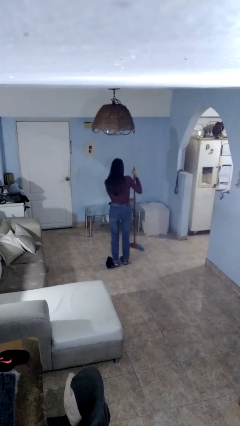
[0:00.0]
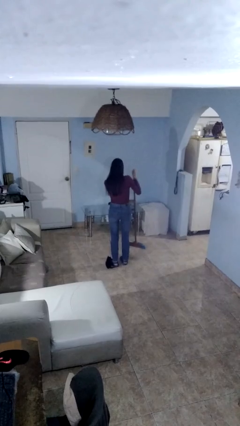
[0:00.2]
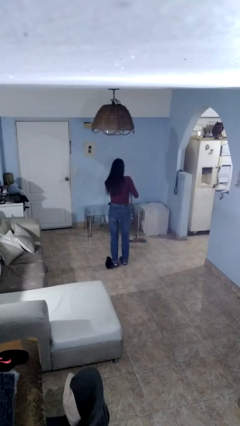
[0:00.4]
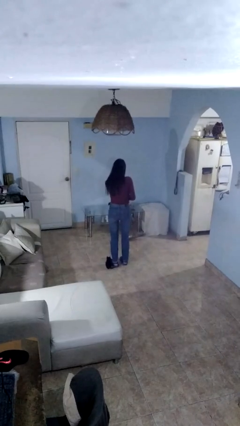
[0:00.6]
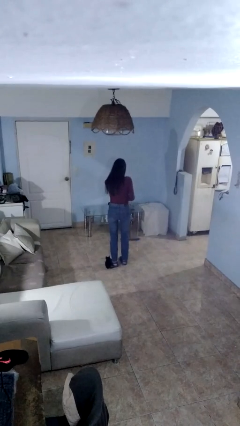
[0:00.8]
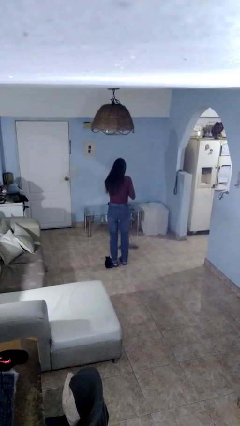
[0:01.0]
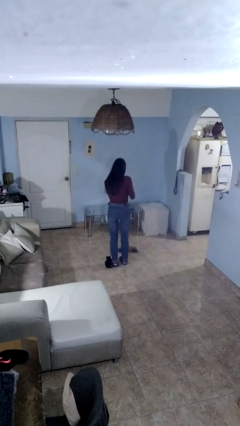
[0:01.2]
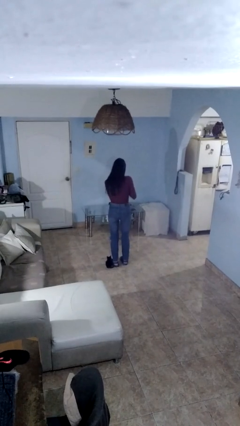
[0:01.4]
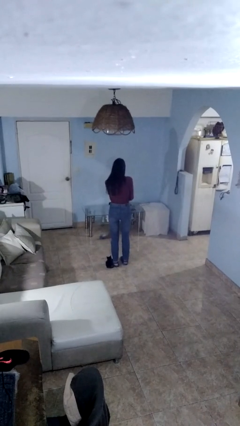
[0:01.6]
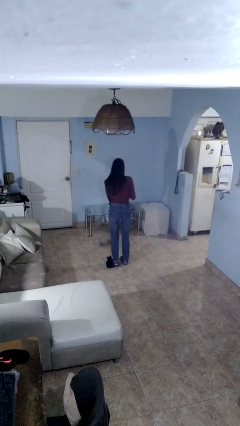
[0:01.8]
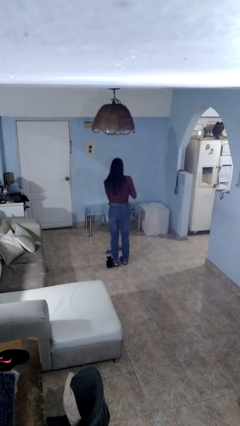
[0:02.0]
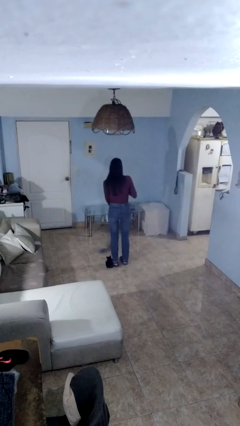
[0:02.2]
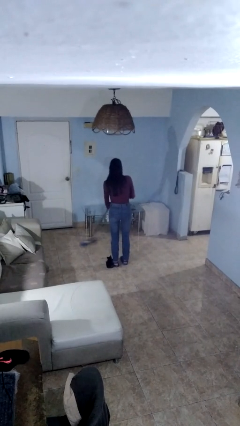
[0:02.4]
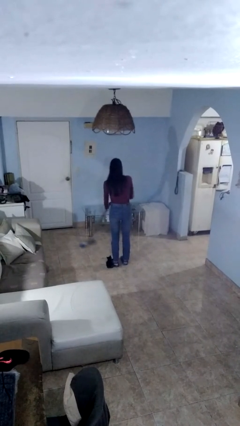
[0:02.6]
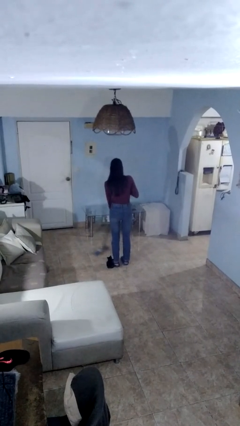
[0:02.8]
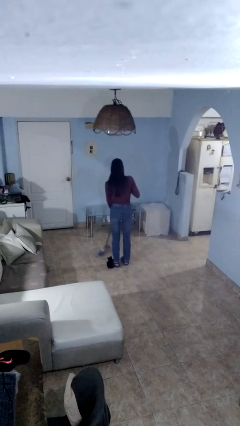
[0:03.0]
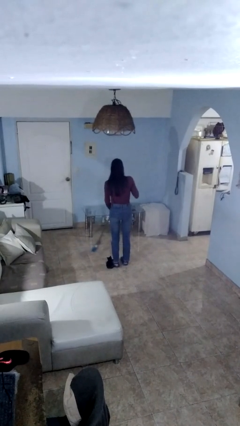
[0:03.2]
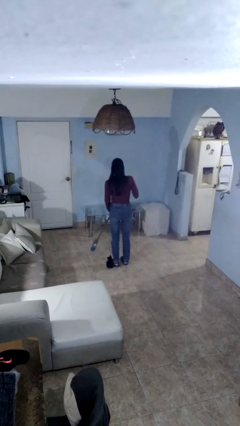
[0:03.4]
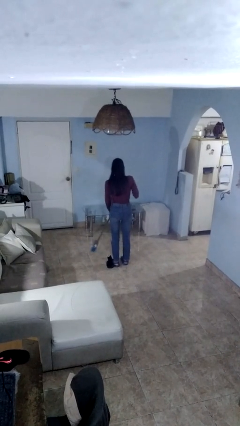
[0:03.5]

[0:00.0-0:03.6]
person sweeps floor

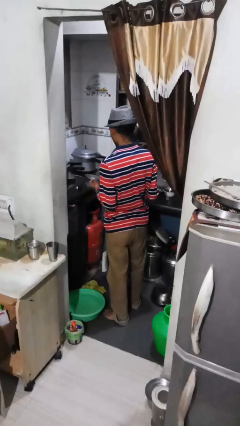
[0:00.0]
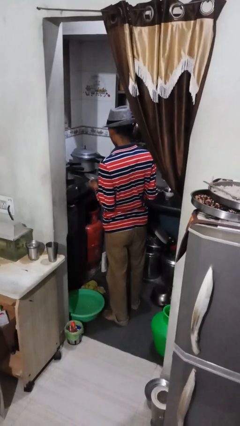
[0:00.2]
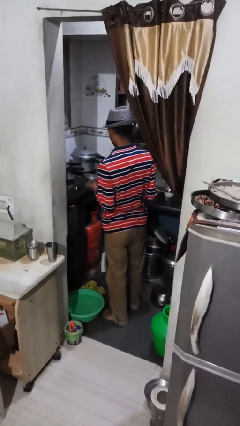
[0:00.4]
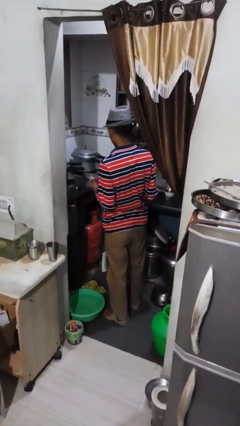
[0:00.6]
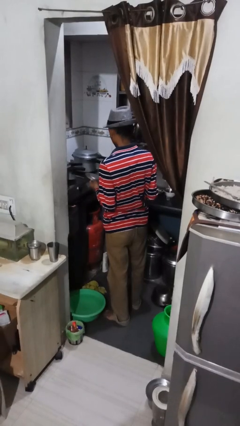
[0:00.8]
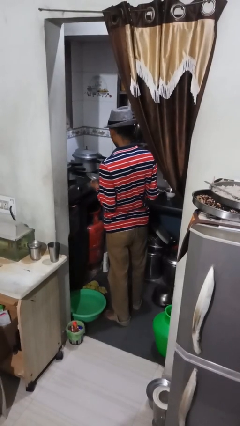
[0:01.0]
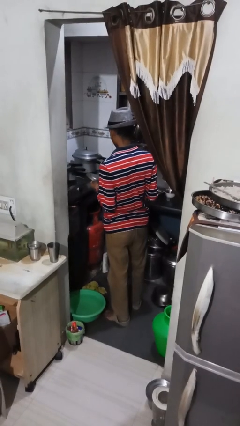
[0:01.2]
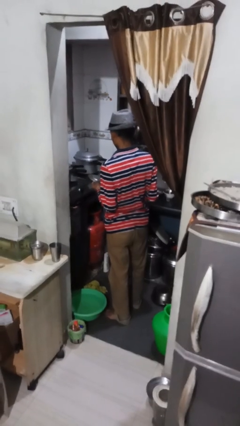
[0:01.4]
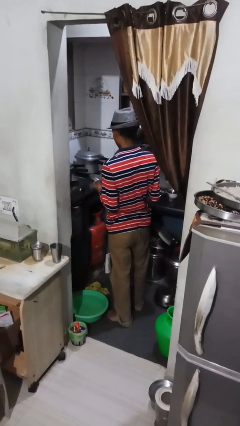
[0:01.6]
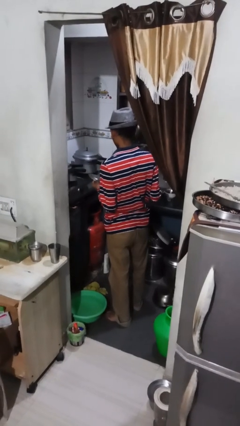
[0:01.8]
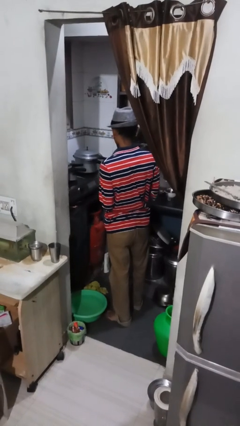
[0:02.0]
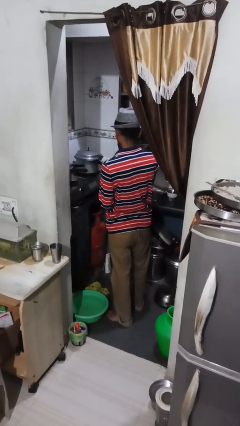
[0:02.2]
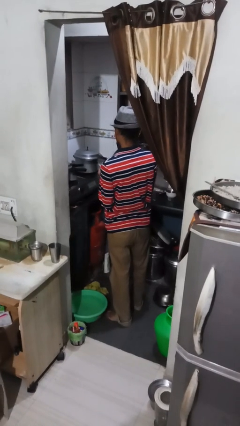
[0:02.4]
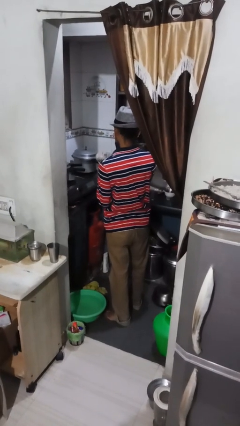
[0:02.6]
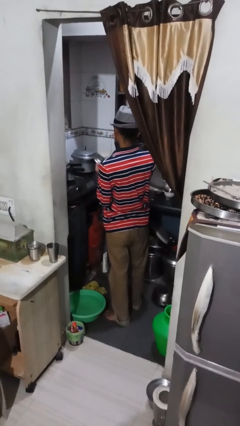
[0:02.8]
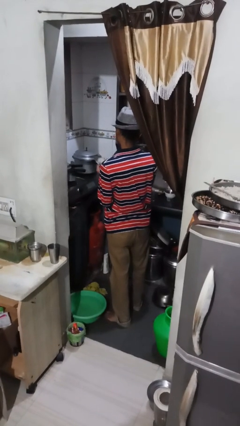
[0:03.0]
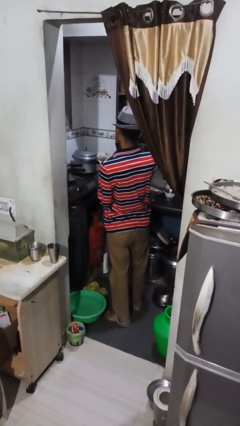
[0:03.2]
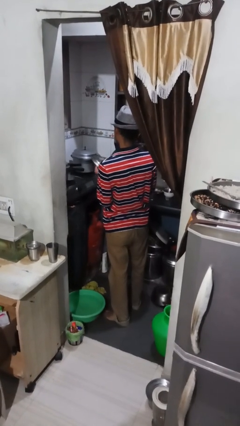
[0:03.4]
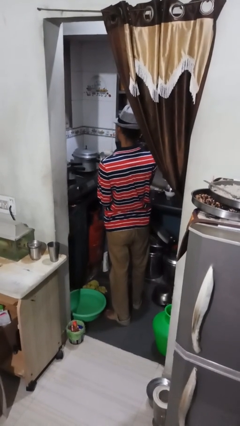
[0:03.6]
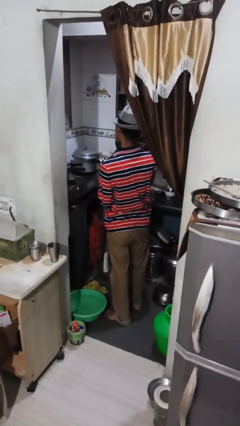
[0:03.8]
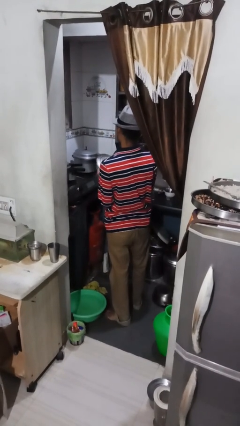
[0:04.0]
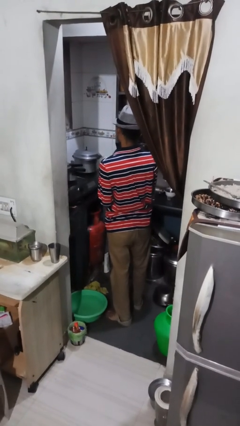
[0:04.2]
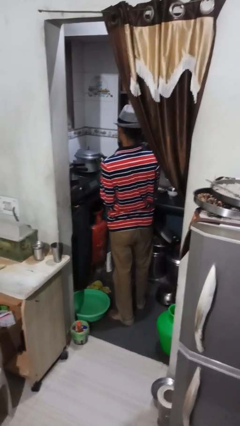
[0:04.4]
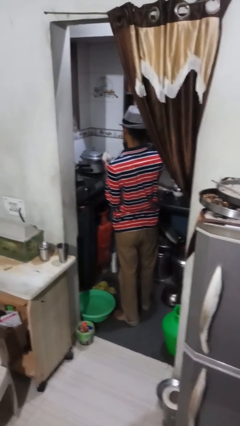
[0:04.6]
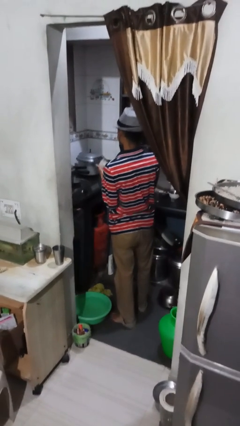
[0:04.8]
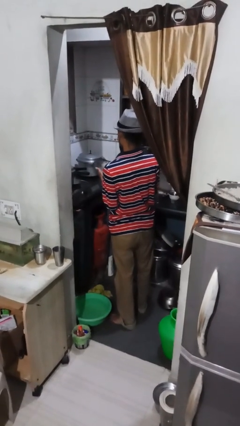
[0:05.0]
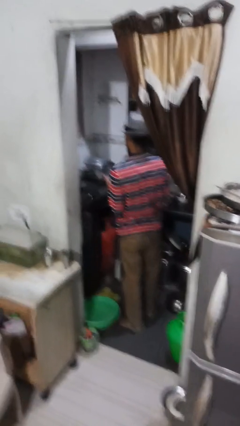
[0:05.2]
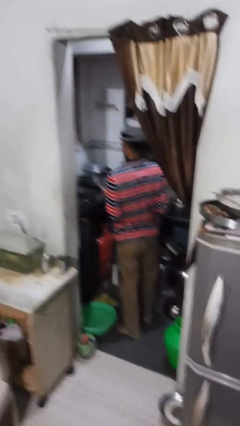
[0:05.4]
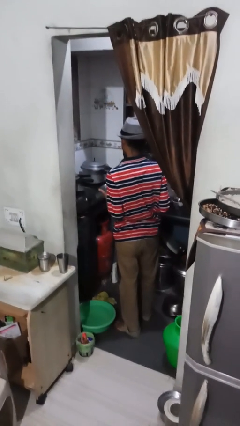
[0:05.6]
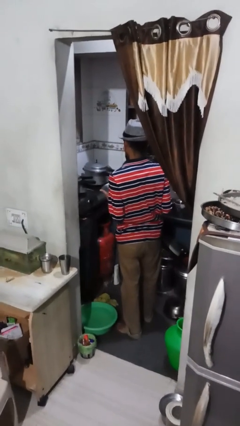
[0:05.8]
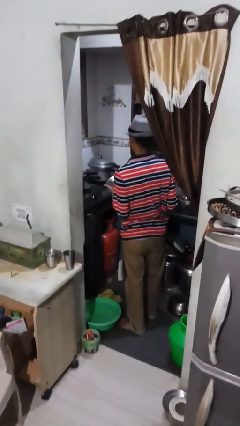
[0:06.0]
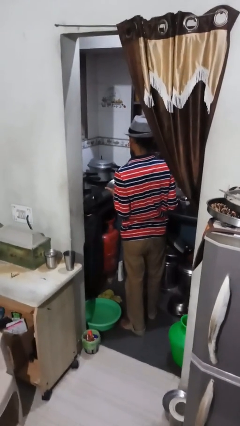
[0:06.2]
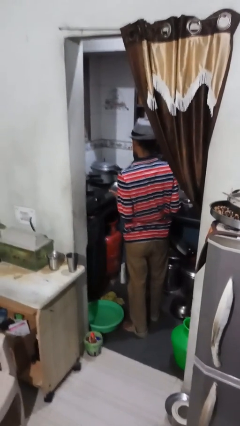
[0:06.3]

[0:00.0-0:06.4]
person dries dish

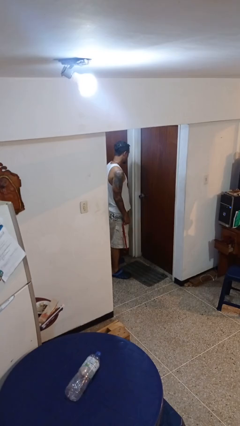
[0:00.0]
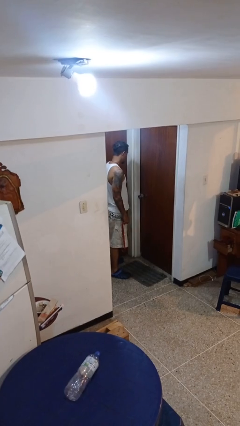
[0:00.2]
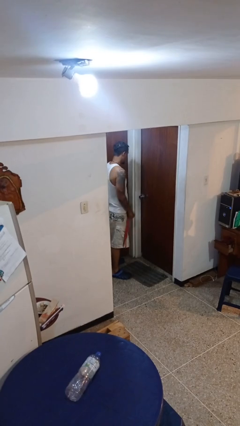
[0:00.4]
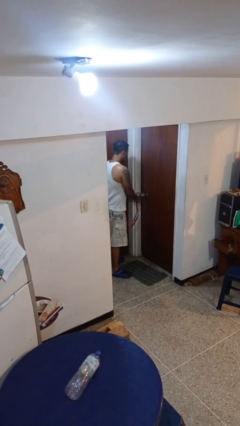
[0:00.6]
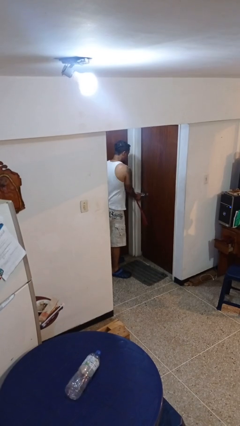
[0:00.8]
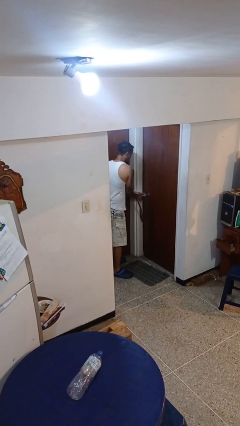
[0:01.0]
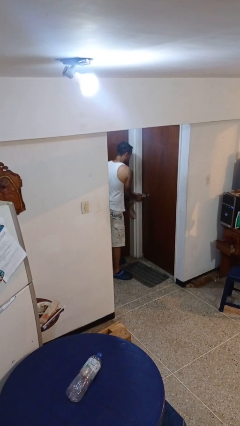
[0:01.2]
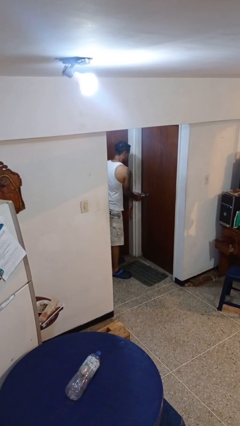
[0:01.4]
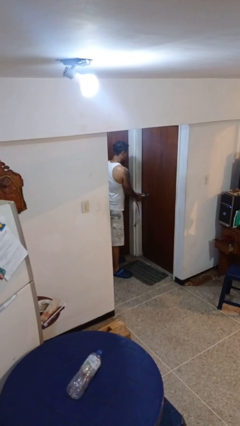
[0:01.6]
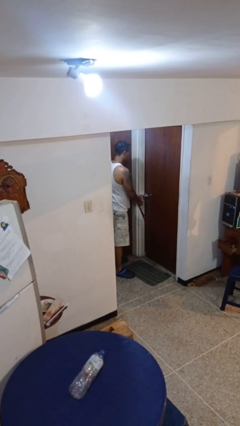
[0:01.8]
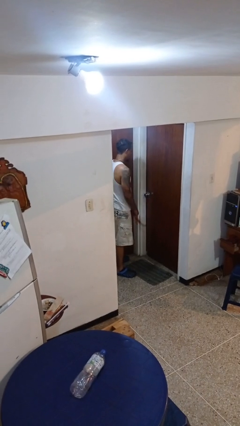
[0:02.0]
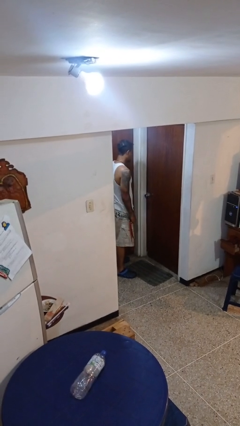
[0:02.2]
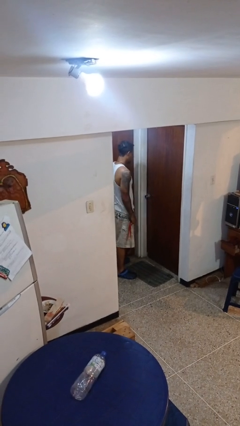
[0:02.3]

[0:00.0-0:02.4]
person locks door with keys

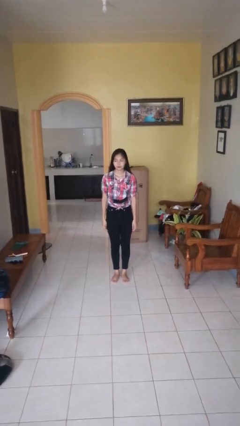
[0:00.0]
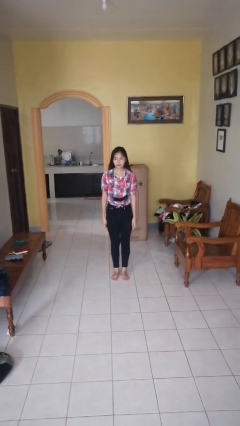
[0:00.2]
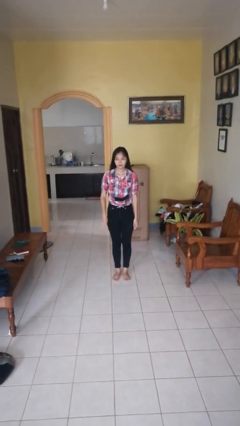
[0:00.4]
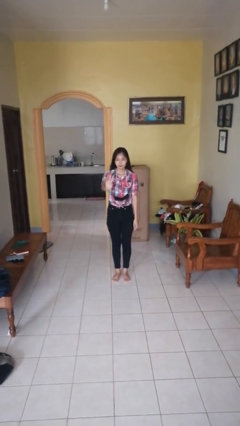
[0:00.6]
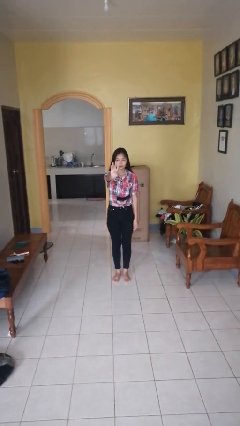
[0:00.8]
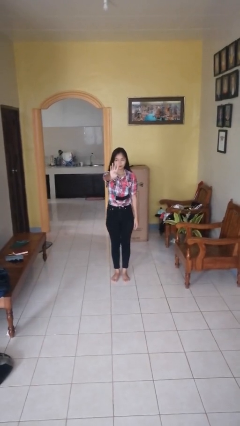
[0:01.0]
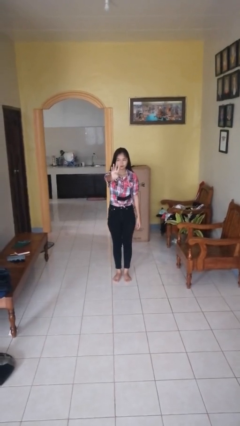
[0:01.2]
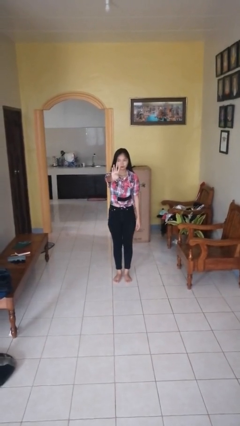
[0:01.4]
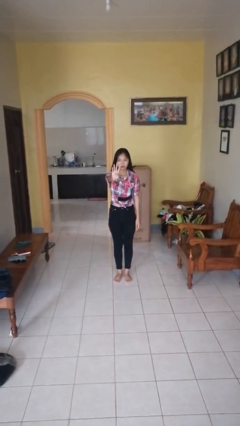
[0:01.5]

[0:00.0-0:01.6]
person gestures number four

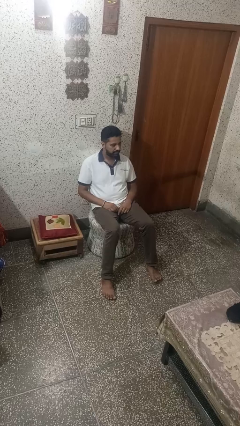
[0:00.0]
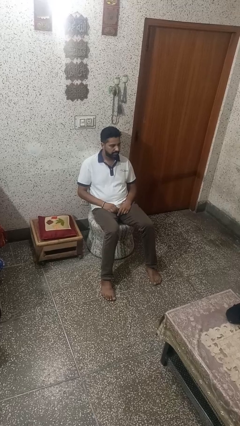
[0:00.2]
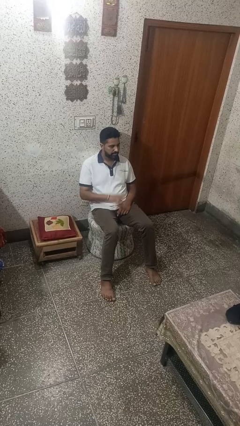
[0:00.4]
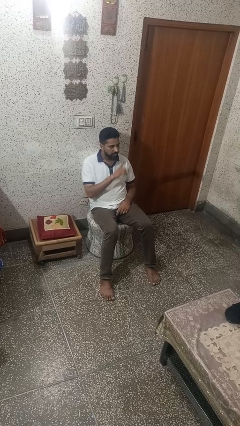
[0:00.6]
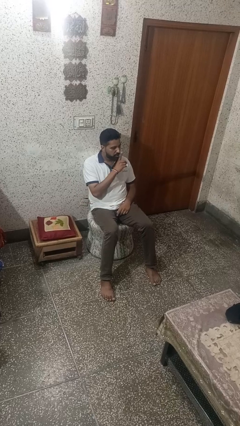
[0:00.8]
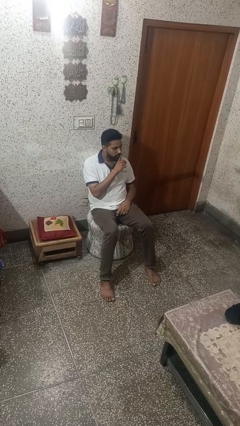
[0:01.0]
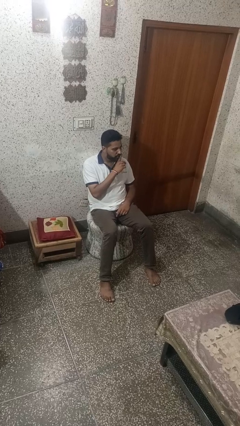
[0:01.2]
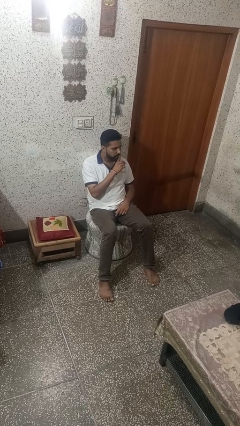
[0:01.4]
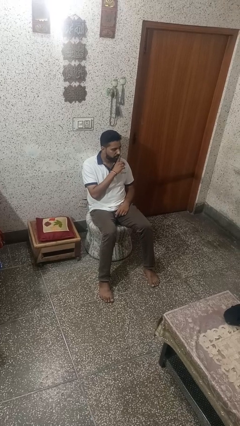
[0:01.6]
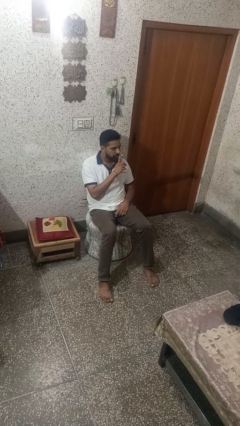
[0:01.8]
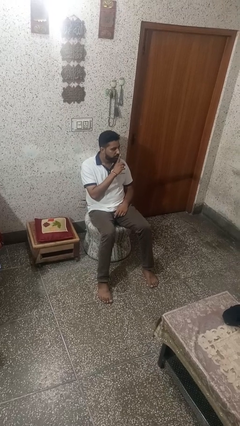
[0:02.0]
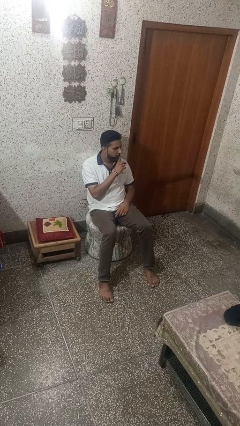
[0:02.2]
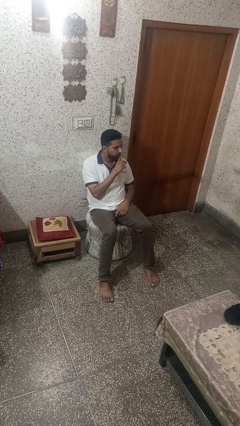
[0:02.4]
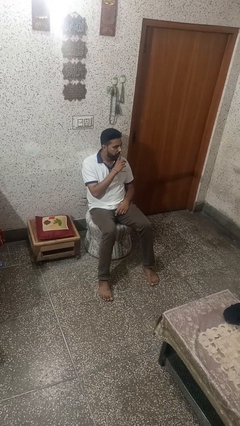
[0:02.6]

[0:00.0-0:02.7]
person gestures be quiet

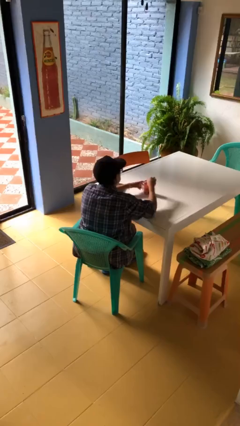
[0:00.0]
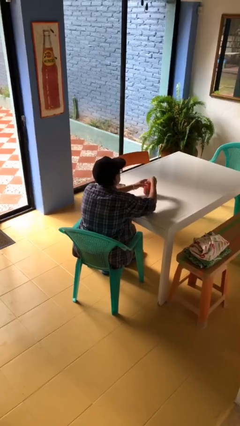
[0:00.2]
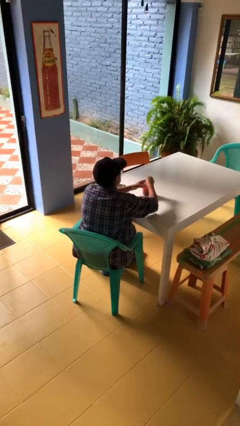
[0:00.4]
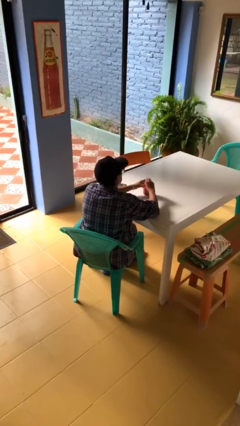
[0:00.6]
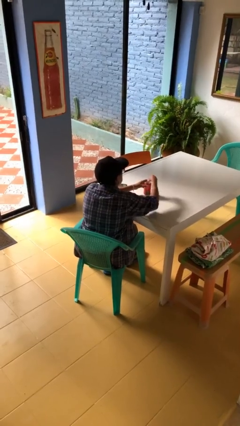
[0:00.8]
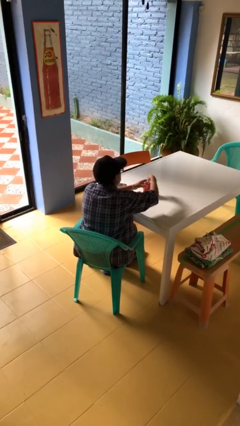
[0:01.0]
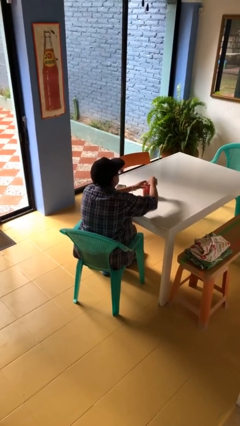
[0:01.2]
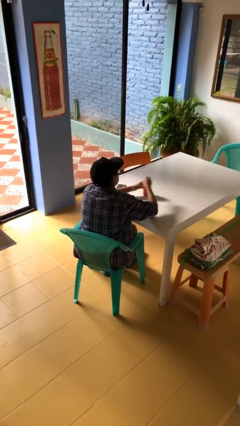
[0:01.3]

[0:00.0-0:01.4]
person opens beverage can
